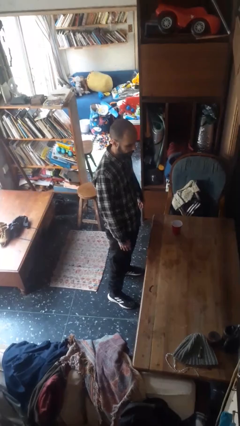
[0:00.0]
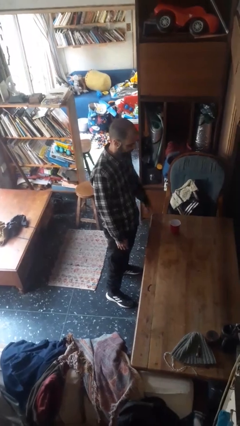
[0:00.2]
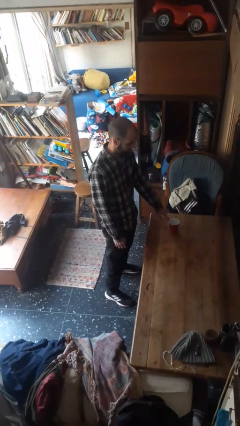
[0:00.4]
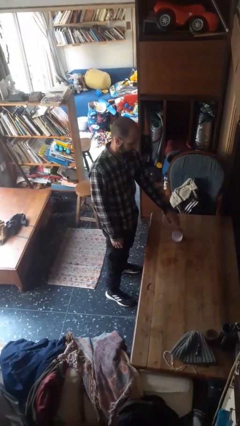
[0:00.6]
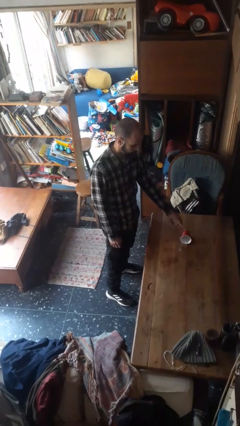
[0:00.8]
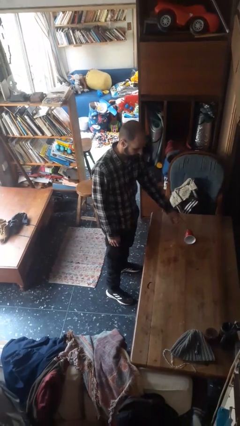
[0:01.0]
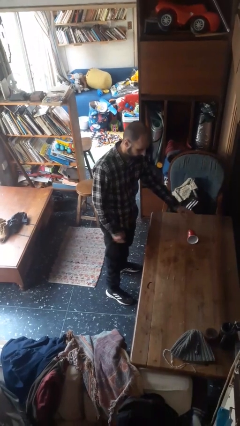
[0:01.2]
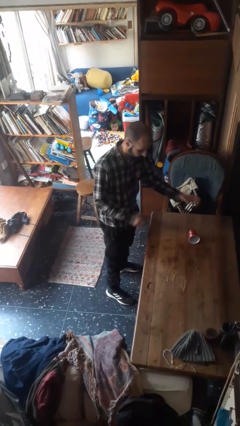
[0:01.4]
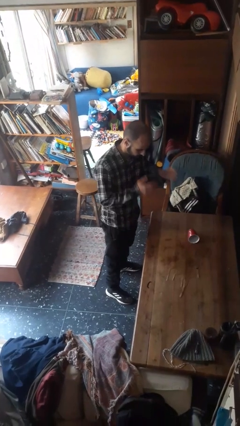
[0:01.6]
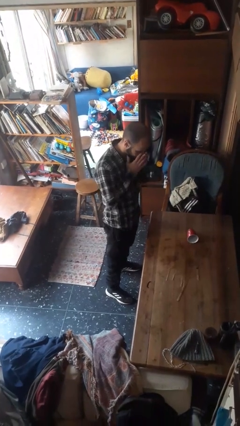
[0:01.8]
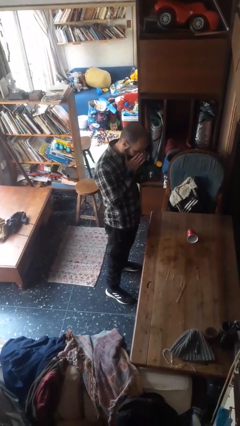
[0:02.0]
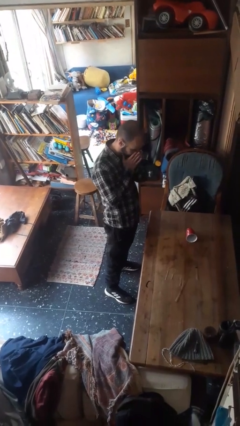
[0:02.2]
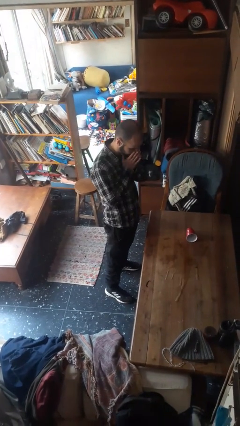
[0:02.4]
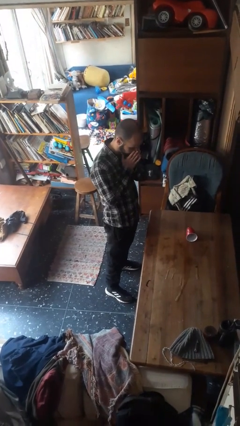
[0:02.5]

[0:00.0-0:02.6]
person spills on table

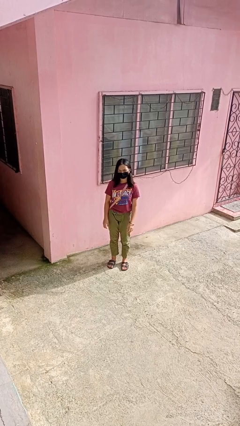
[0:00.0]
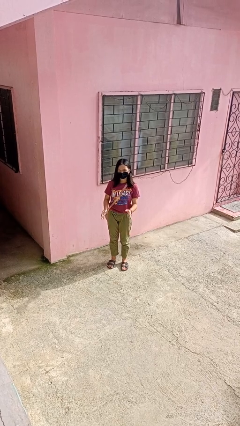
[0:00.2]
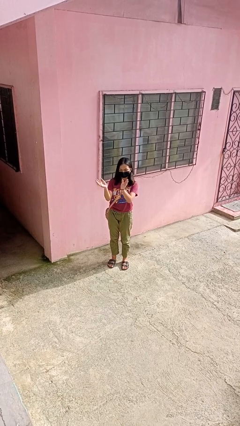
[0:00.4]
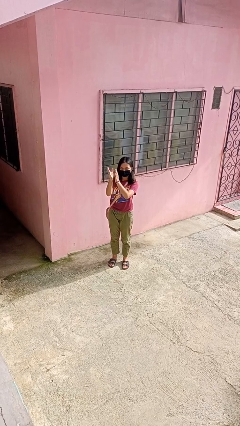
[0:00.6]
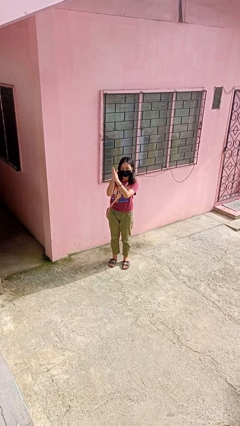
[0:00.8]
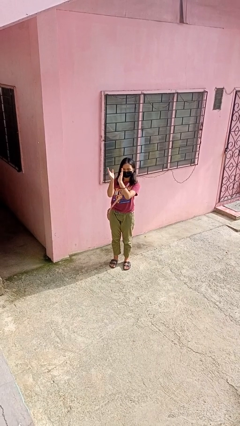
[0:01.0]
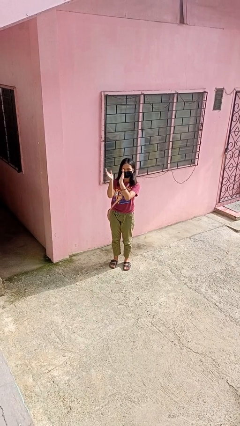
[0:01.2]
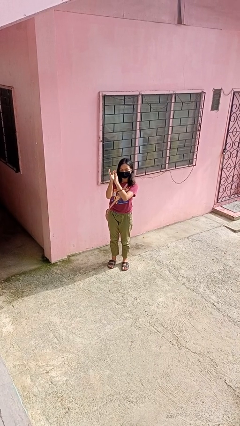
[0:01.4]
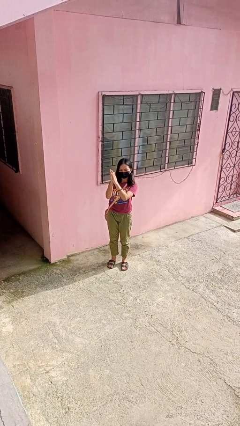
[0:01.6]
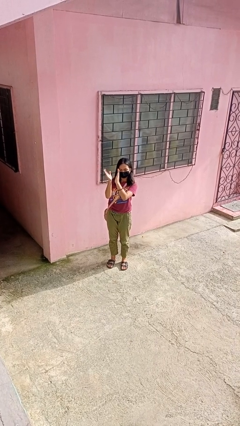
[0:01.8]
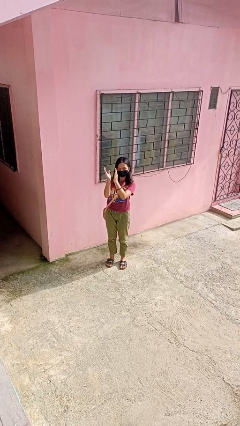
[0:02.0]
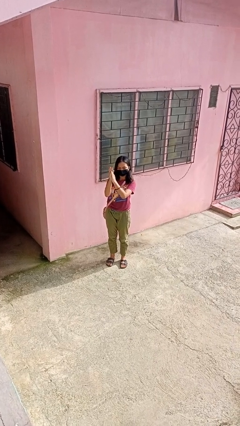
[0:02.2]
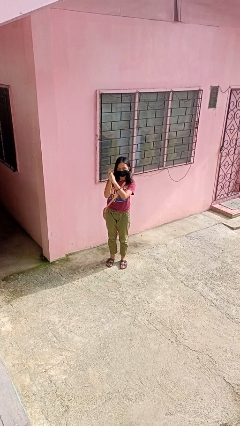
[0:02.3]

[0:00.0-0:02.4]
person claps hands

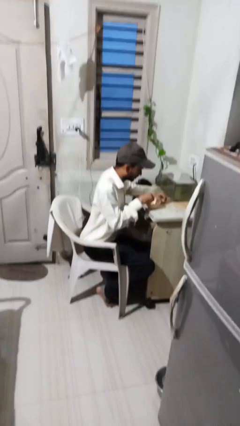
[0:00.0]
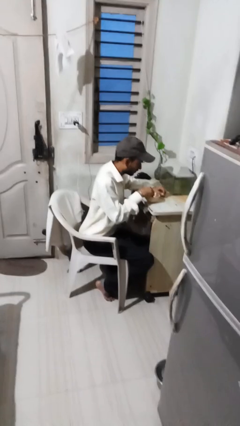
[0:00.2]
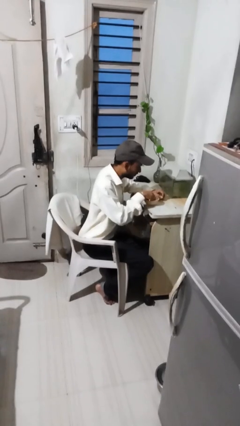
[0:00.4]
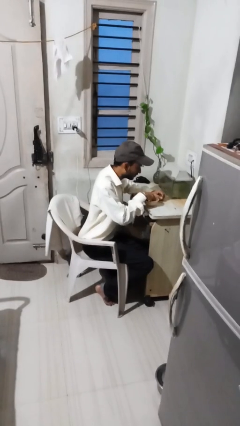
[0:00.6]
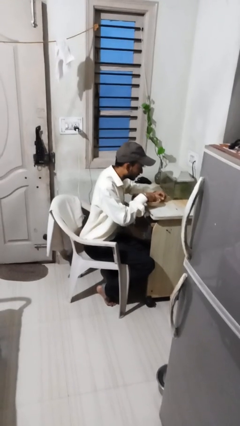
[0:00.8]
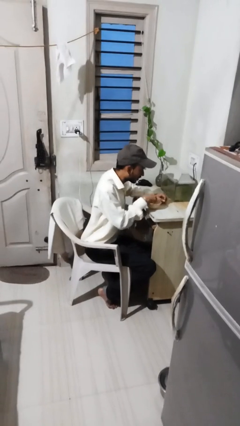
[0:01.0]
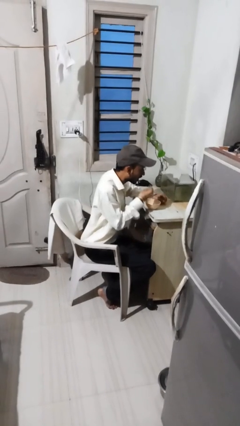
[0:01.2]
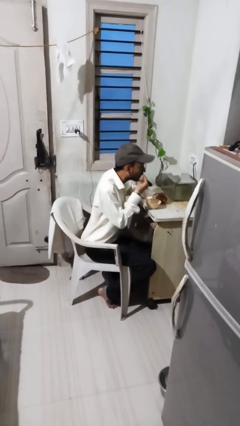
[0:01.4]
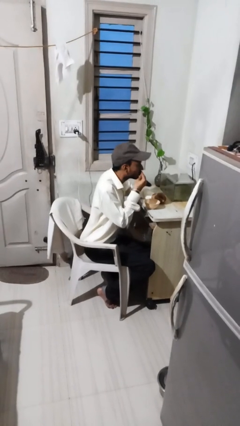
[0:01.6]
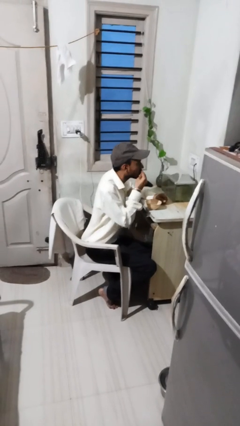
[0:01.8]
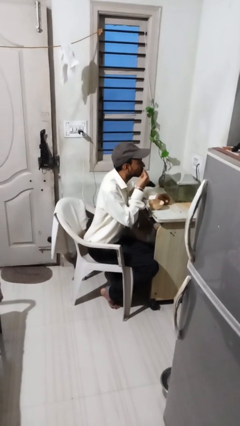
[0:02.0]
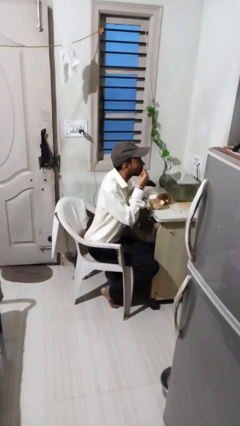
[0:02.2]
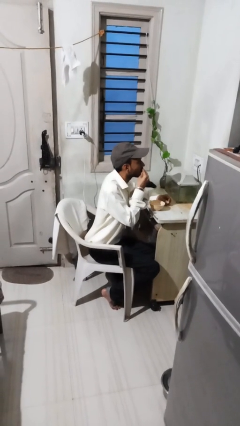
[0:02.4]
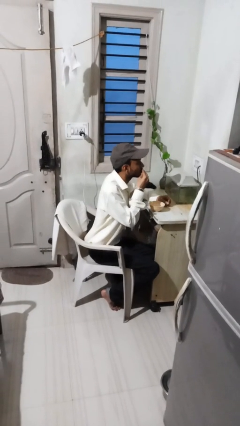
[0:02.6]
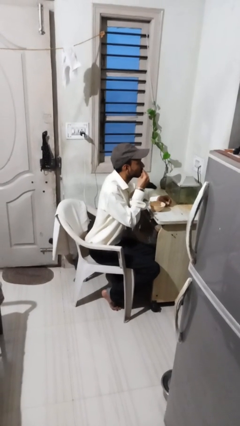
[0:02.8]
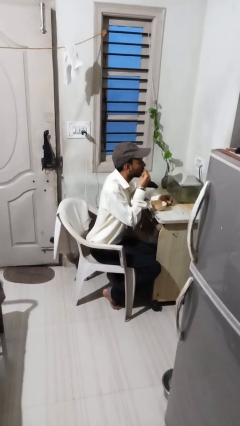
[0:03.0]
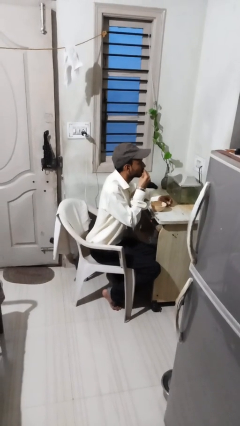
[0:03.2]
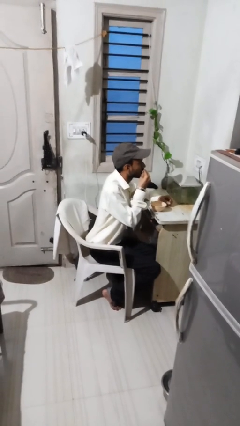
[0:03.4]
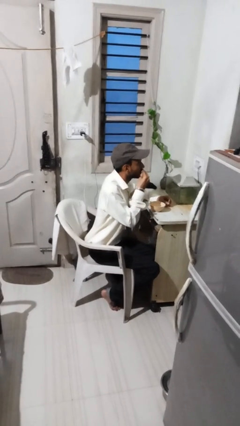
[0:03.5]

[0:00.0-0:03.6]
person eats with hands

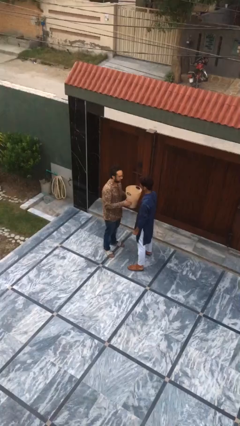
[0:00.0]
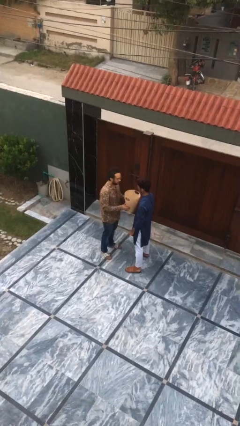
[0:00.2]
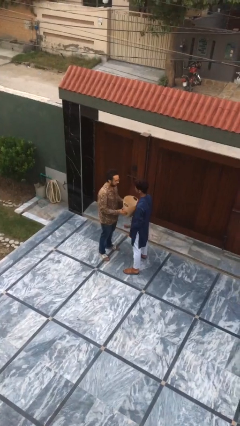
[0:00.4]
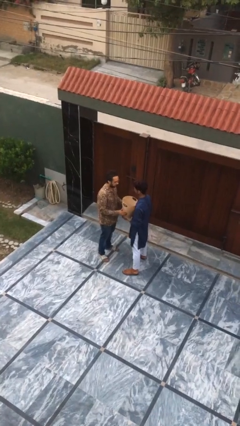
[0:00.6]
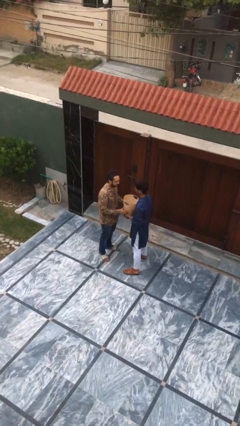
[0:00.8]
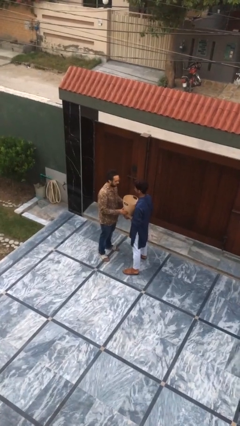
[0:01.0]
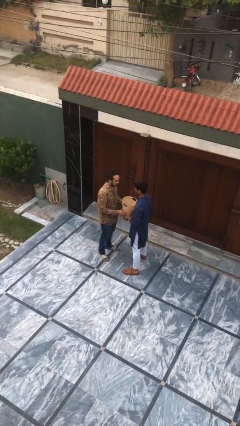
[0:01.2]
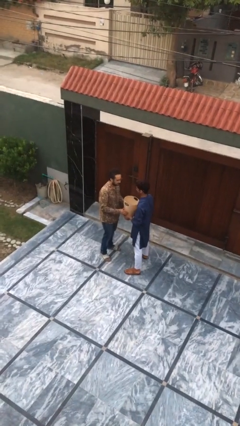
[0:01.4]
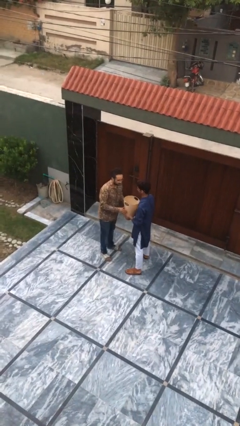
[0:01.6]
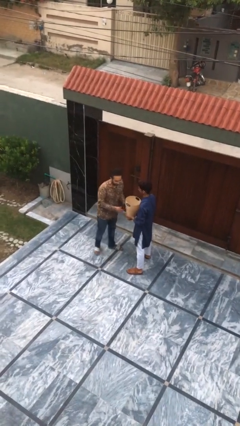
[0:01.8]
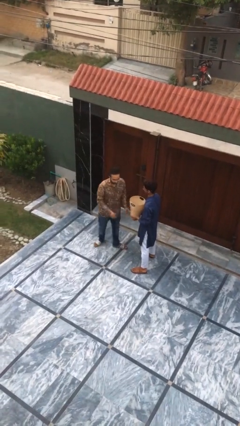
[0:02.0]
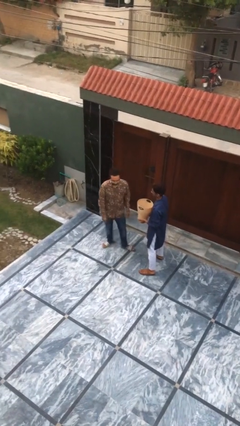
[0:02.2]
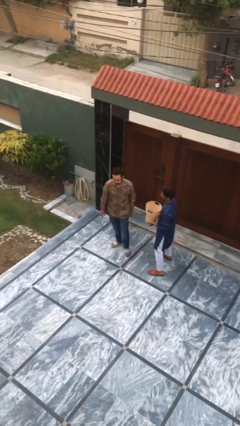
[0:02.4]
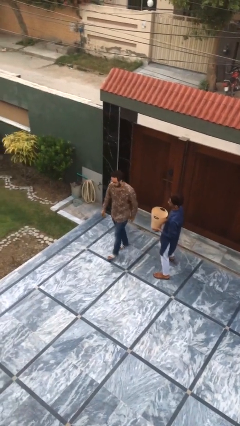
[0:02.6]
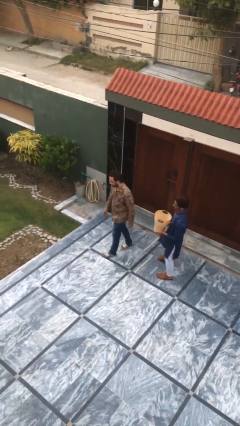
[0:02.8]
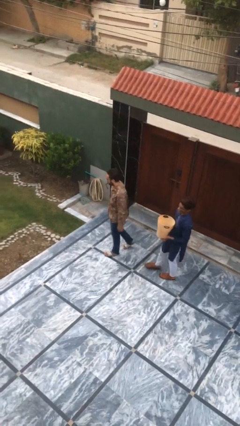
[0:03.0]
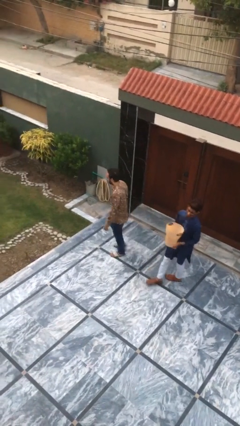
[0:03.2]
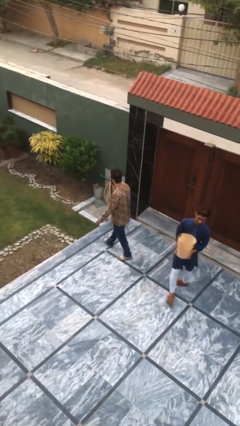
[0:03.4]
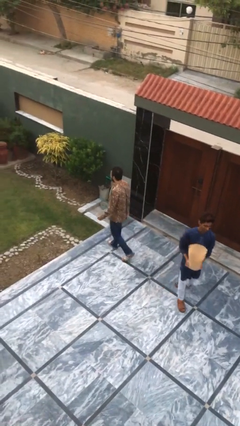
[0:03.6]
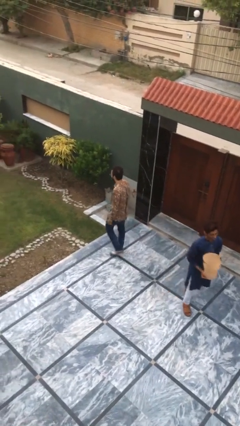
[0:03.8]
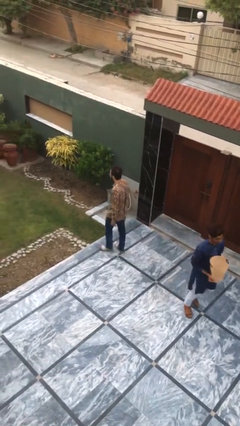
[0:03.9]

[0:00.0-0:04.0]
person transfers object to person

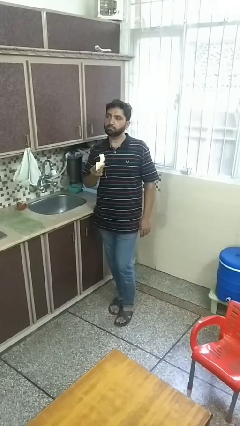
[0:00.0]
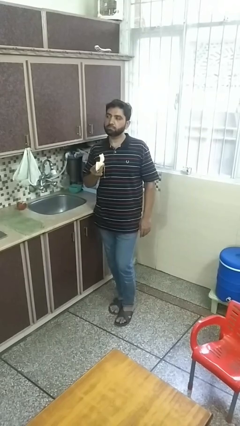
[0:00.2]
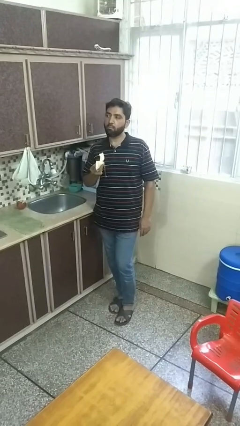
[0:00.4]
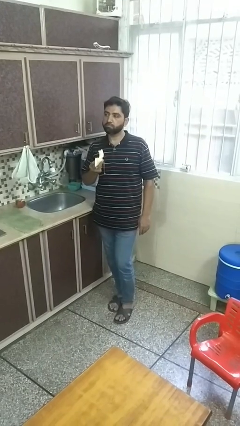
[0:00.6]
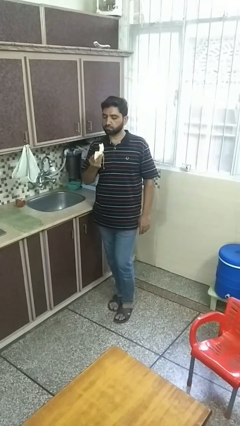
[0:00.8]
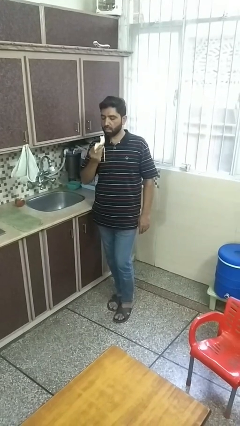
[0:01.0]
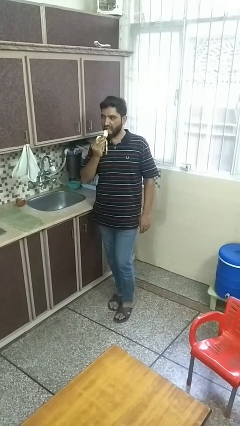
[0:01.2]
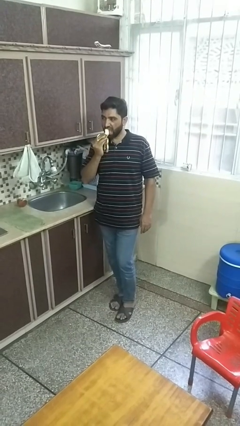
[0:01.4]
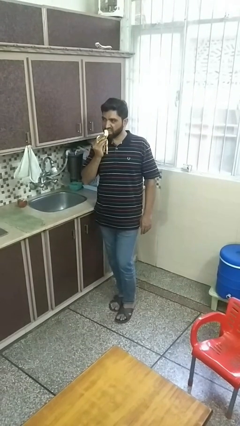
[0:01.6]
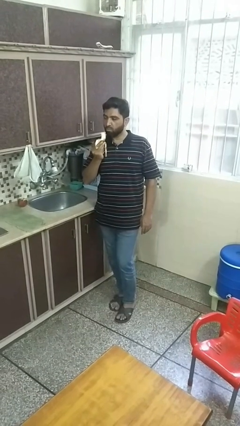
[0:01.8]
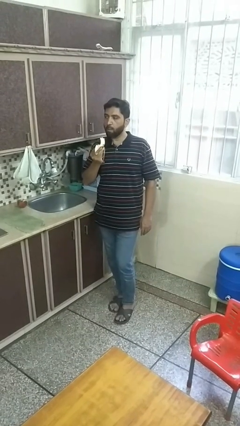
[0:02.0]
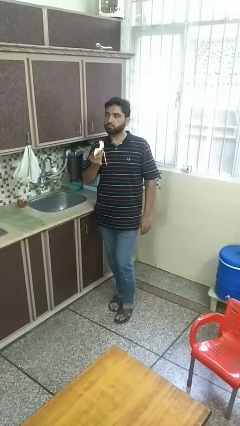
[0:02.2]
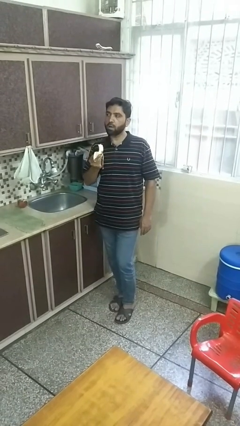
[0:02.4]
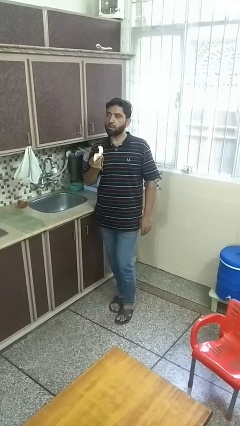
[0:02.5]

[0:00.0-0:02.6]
person eats banana

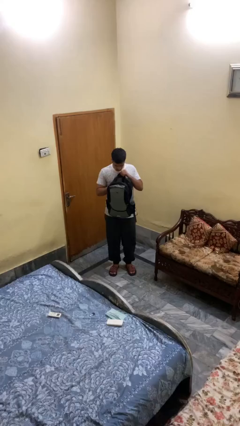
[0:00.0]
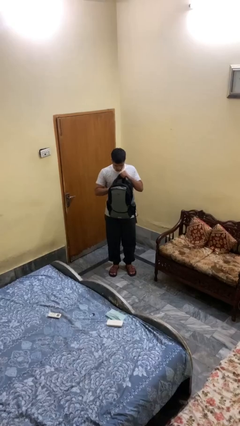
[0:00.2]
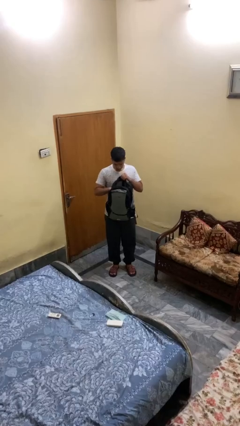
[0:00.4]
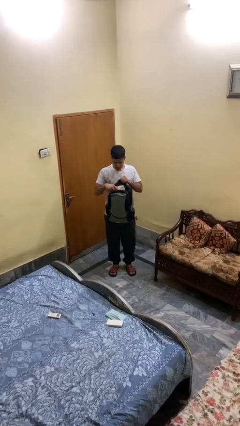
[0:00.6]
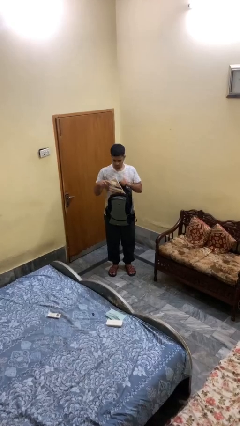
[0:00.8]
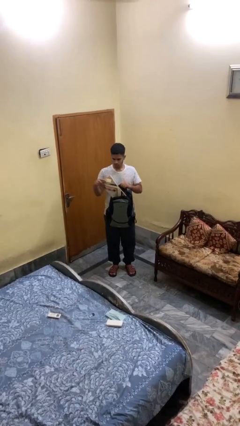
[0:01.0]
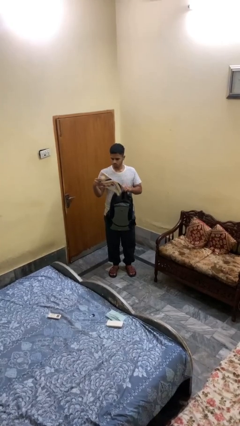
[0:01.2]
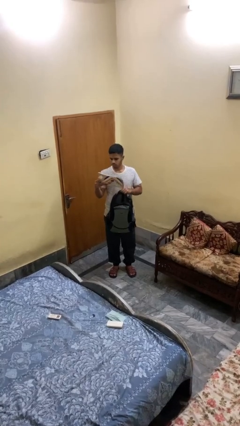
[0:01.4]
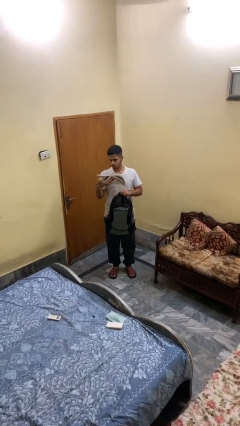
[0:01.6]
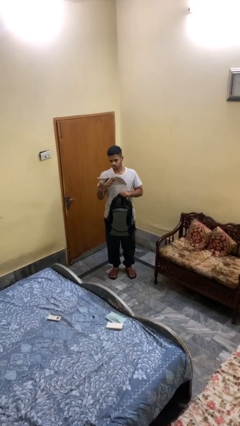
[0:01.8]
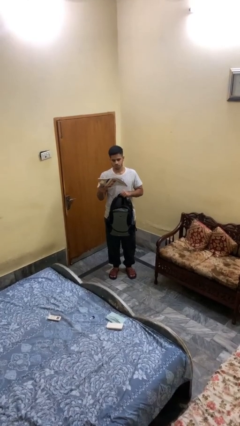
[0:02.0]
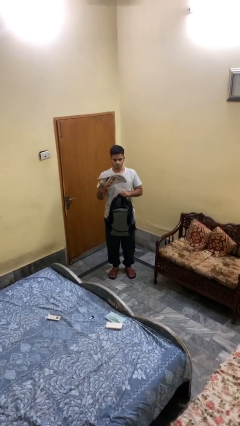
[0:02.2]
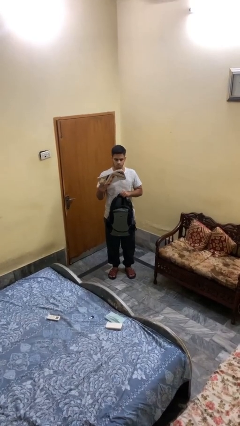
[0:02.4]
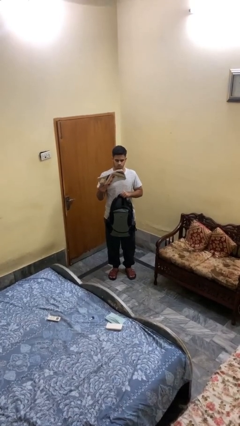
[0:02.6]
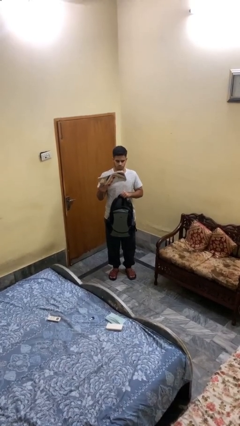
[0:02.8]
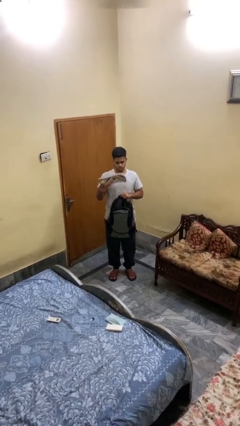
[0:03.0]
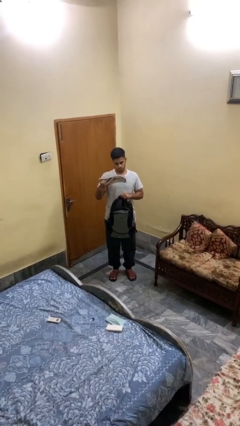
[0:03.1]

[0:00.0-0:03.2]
person takes object from backpack
